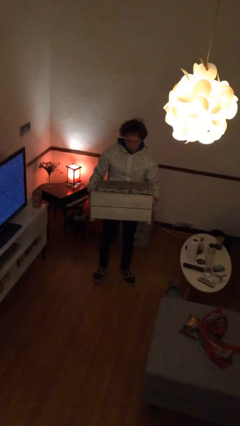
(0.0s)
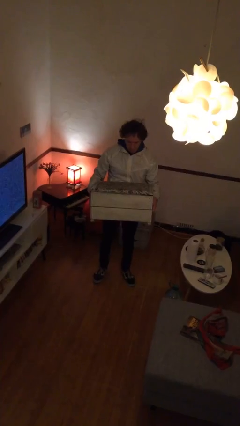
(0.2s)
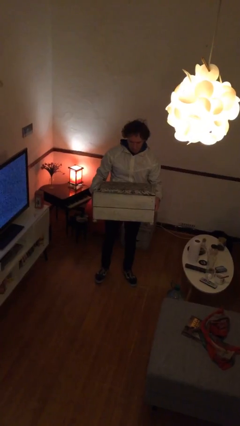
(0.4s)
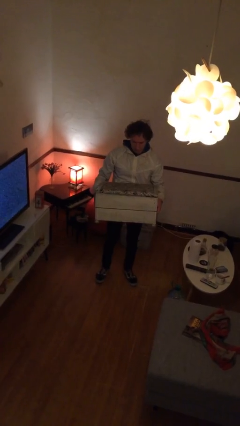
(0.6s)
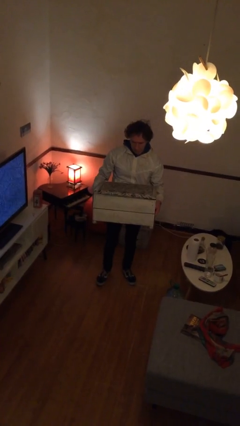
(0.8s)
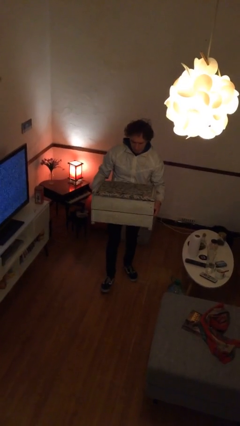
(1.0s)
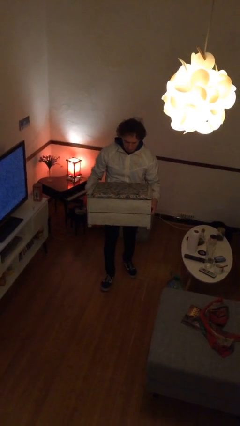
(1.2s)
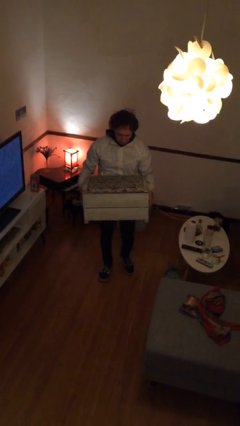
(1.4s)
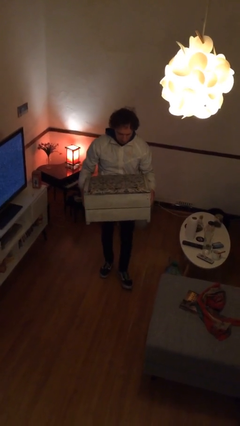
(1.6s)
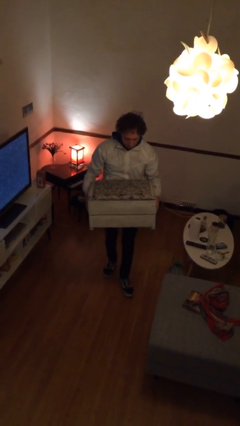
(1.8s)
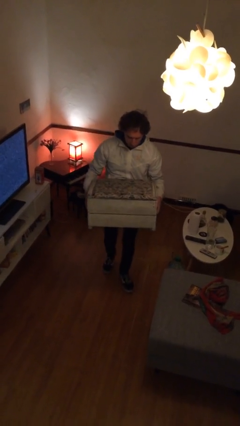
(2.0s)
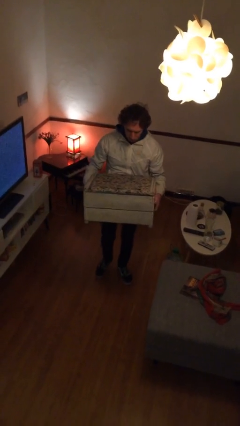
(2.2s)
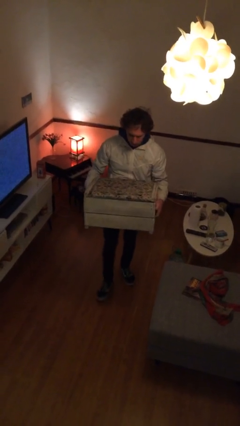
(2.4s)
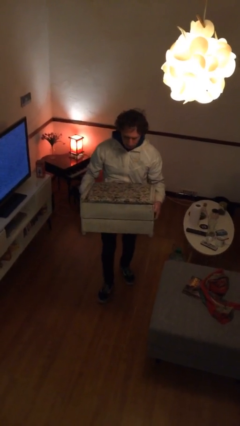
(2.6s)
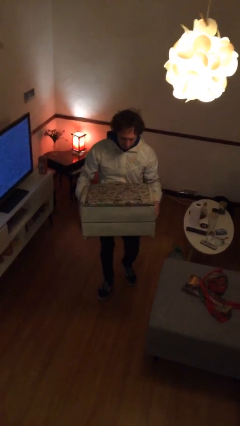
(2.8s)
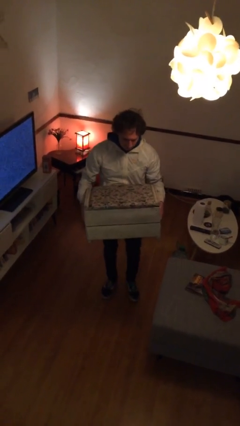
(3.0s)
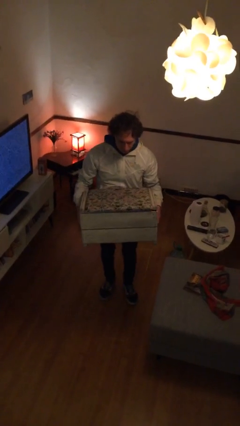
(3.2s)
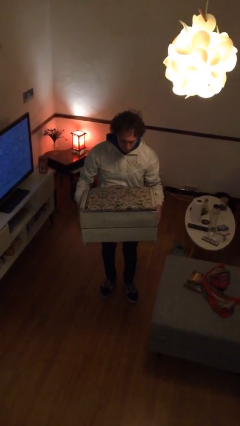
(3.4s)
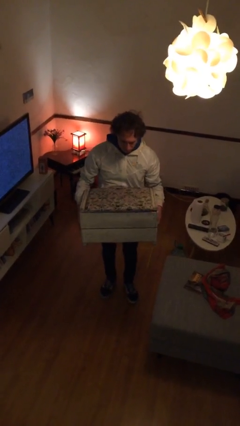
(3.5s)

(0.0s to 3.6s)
person carries furniture

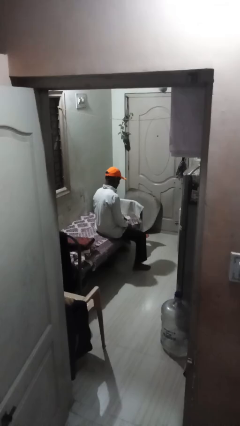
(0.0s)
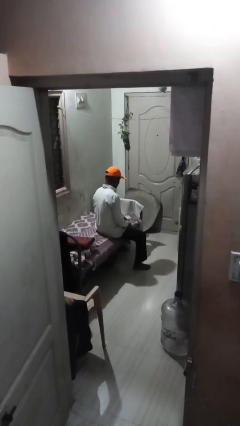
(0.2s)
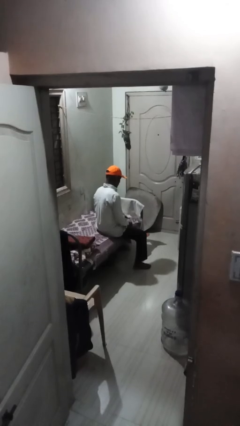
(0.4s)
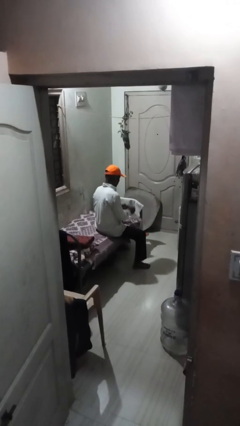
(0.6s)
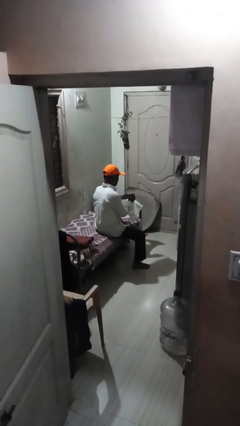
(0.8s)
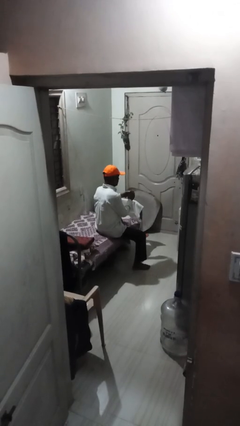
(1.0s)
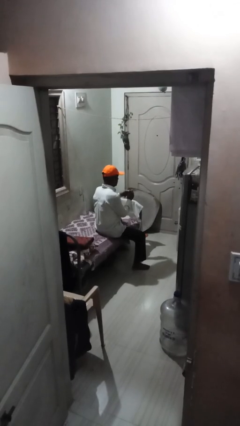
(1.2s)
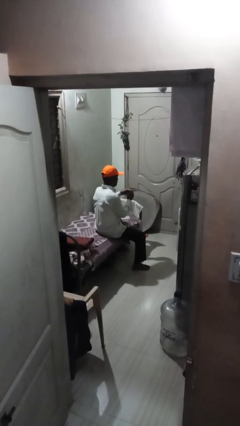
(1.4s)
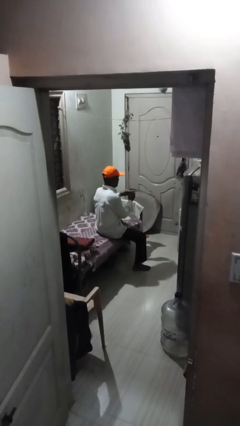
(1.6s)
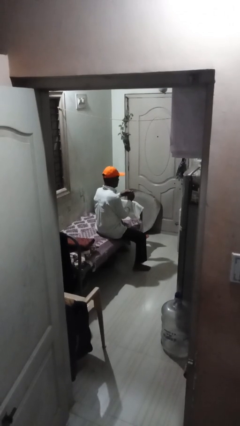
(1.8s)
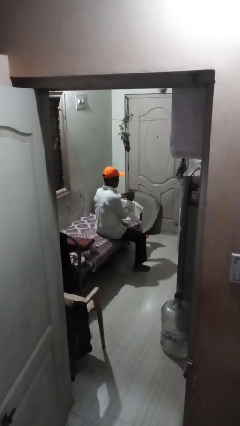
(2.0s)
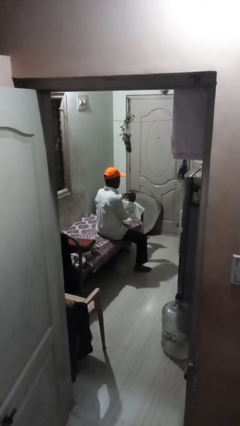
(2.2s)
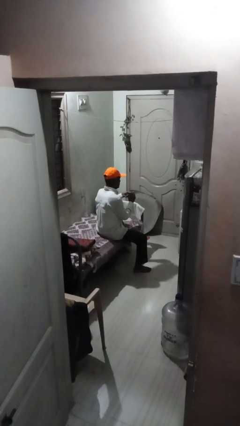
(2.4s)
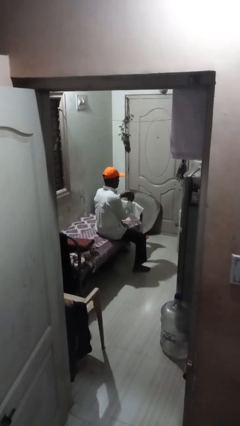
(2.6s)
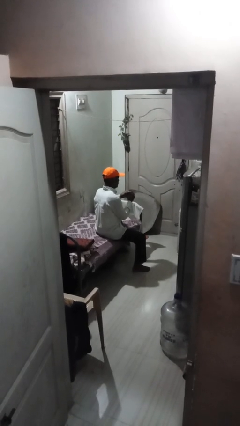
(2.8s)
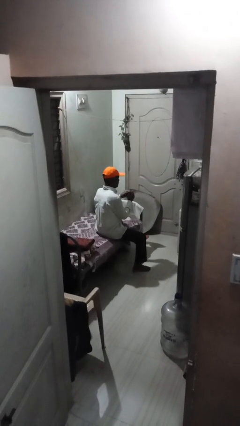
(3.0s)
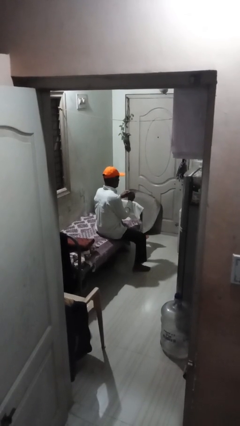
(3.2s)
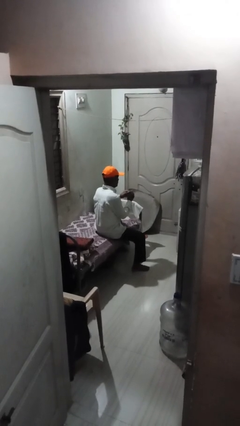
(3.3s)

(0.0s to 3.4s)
person files fingernails

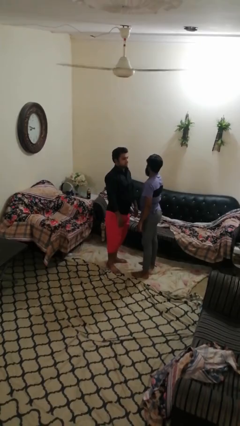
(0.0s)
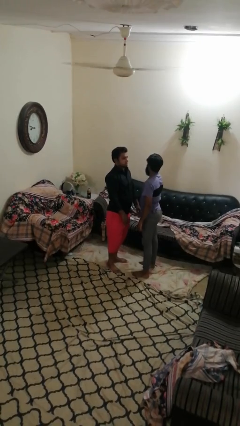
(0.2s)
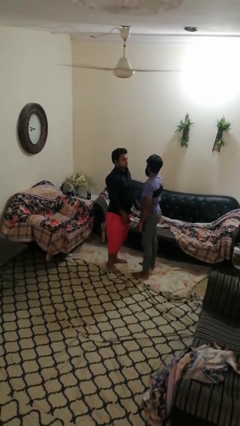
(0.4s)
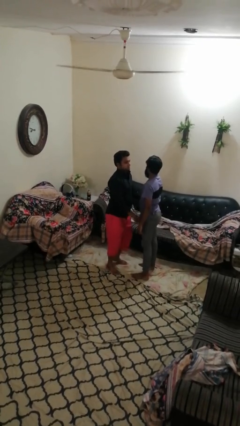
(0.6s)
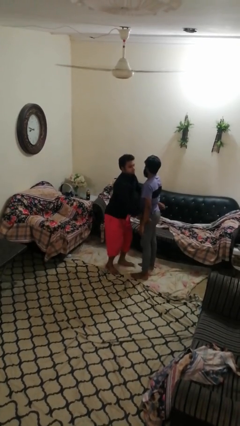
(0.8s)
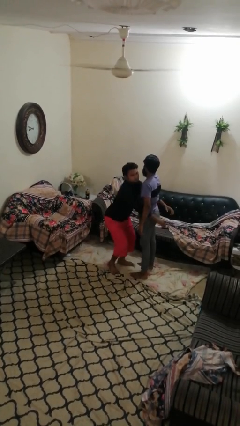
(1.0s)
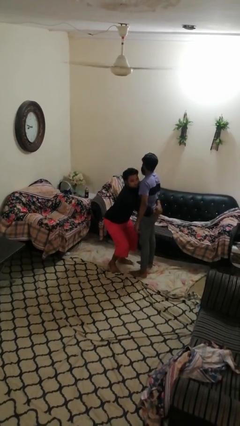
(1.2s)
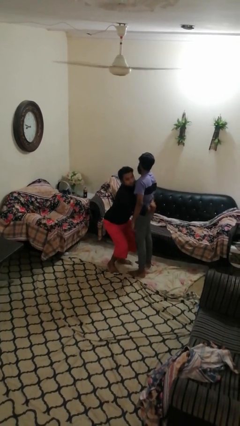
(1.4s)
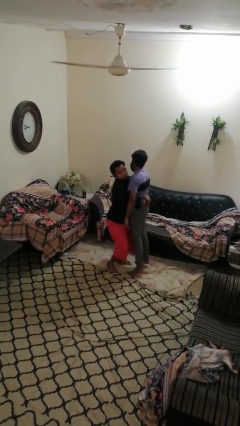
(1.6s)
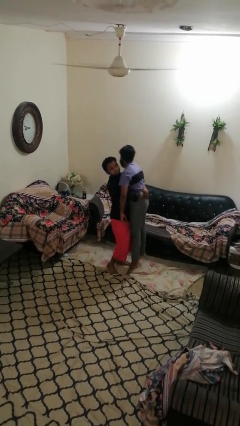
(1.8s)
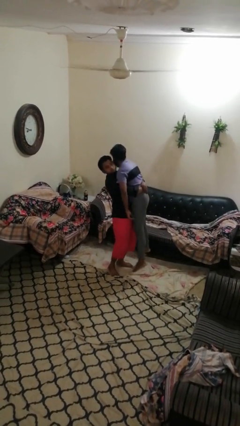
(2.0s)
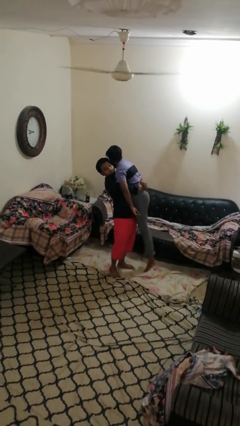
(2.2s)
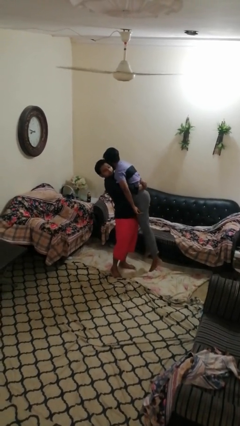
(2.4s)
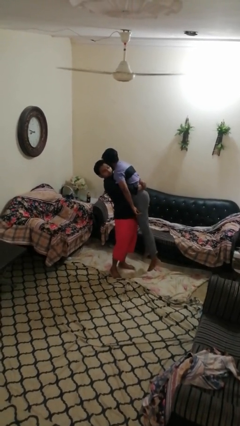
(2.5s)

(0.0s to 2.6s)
person picks up person

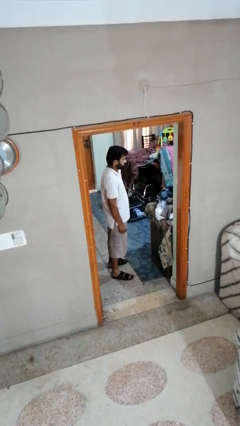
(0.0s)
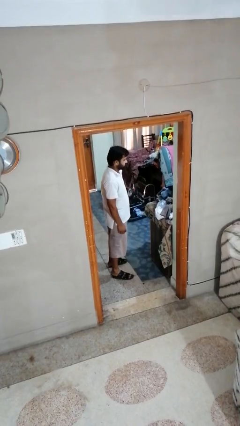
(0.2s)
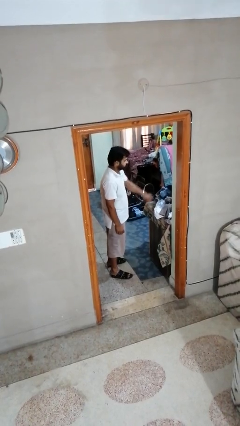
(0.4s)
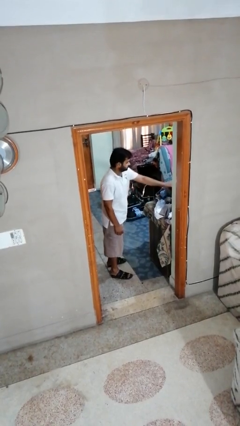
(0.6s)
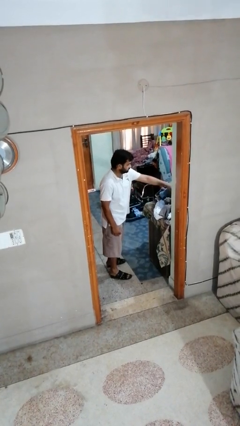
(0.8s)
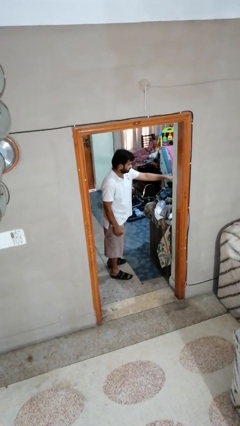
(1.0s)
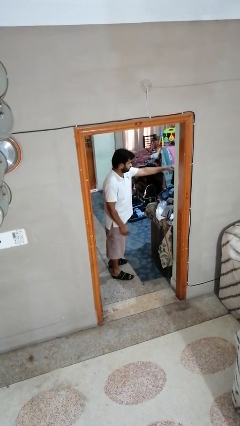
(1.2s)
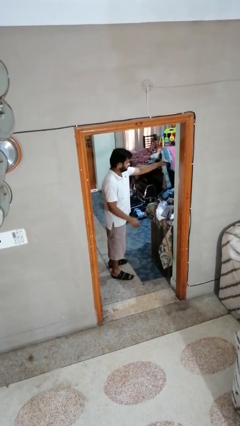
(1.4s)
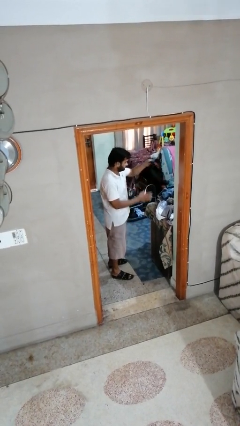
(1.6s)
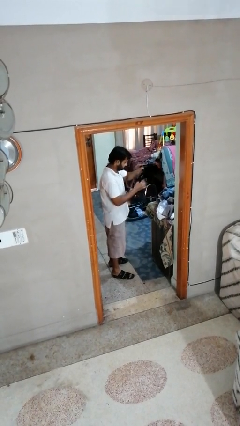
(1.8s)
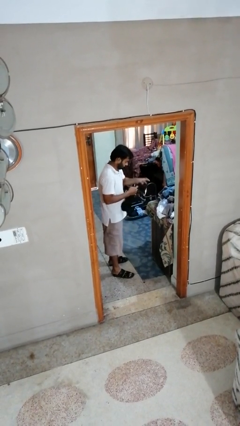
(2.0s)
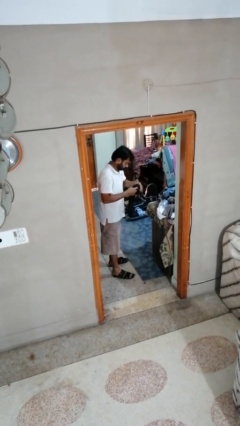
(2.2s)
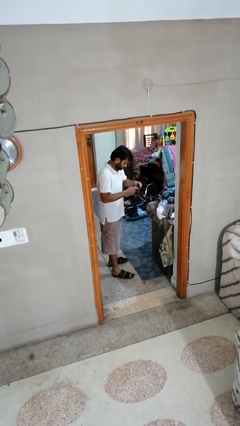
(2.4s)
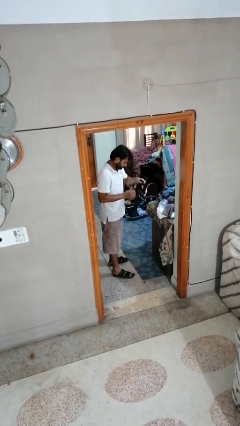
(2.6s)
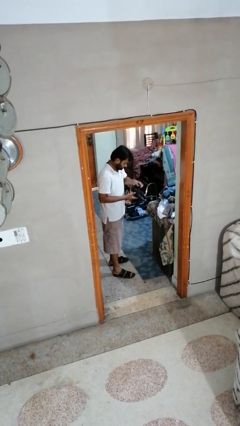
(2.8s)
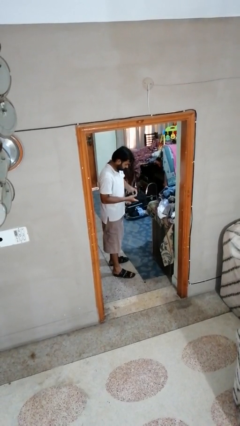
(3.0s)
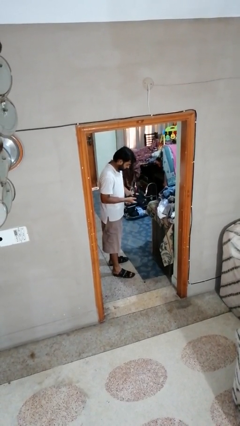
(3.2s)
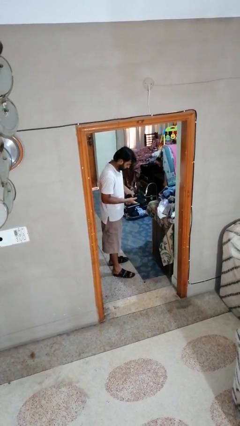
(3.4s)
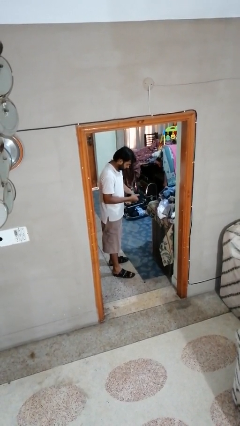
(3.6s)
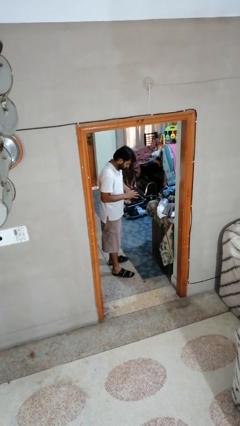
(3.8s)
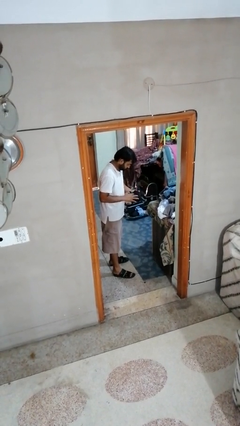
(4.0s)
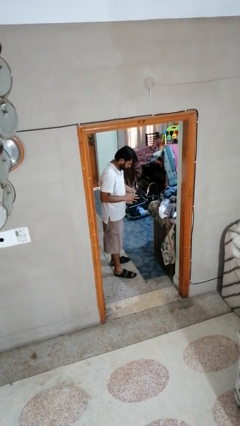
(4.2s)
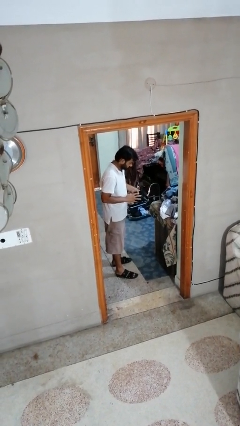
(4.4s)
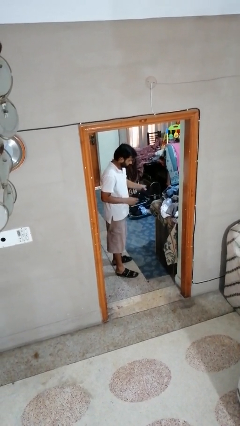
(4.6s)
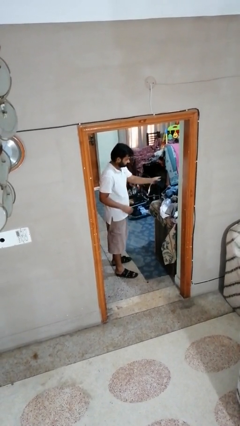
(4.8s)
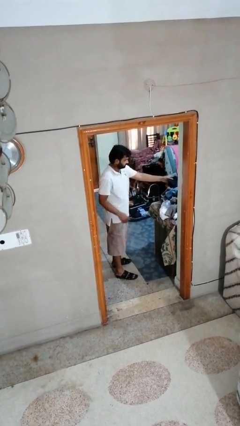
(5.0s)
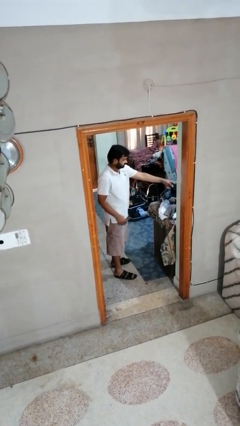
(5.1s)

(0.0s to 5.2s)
person folds socks

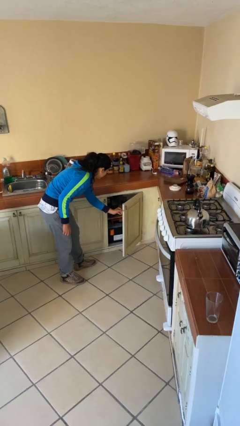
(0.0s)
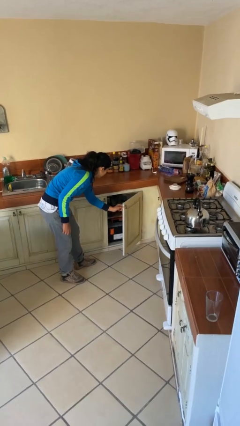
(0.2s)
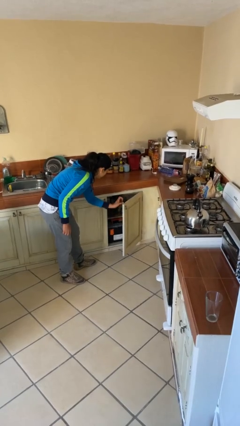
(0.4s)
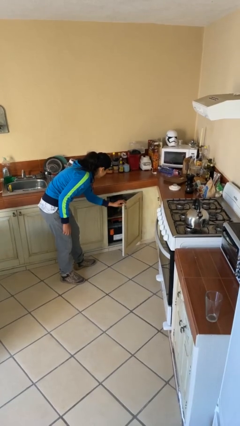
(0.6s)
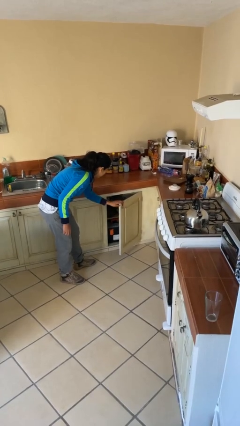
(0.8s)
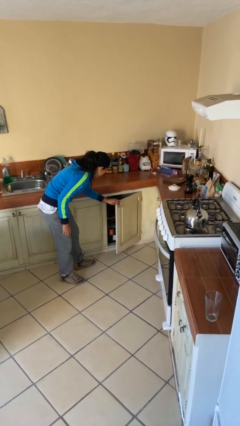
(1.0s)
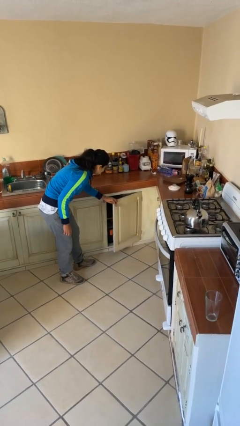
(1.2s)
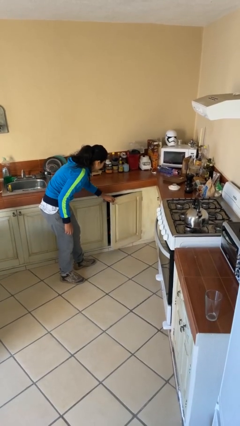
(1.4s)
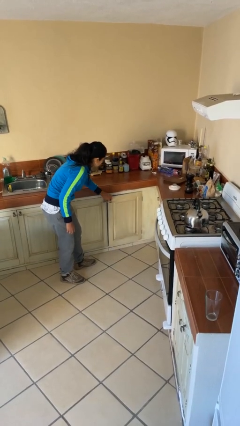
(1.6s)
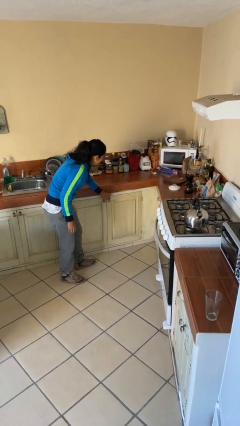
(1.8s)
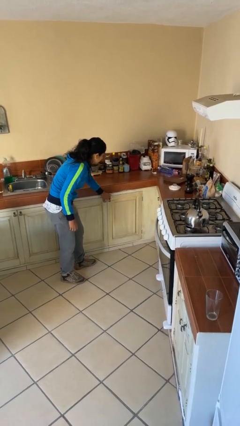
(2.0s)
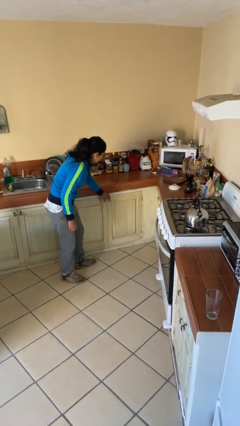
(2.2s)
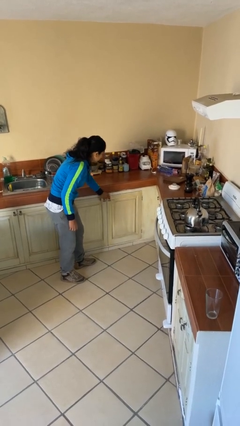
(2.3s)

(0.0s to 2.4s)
person closes cabinet

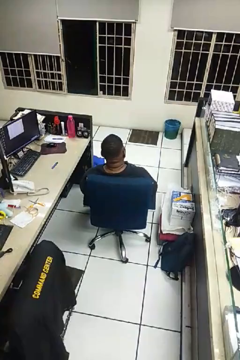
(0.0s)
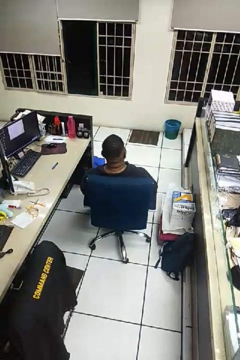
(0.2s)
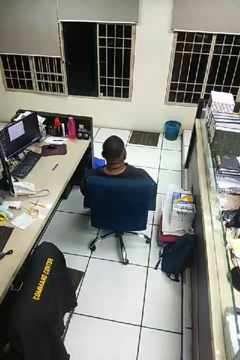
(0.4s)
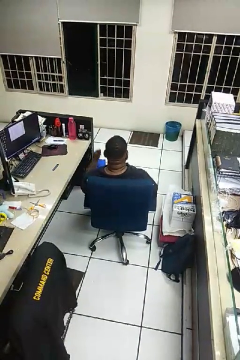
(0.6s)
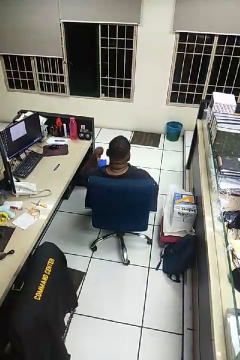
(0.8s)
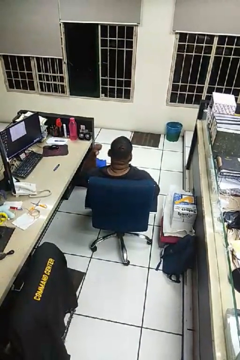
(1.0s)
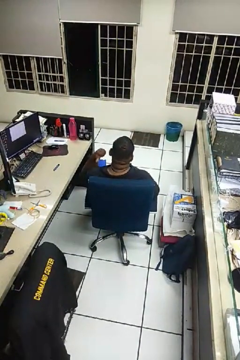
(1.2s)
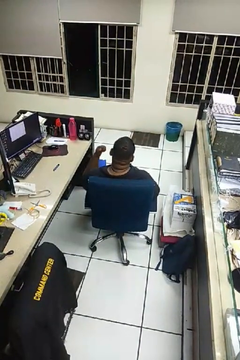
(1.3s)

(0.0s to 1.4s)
person gestures behind me
